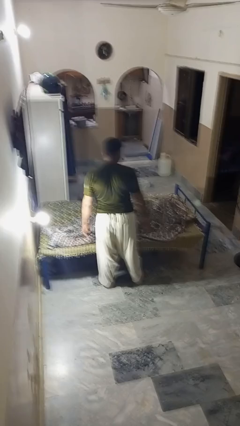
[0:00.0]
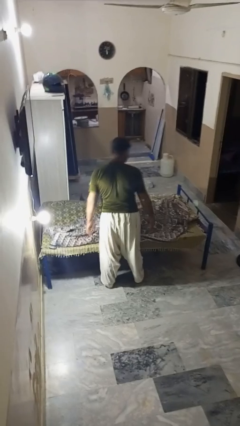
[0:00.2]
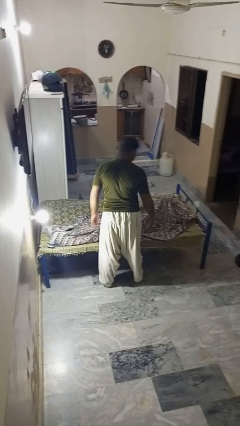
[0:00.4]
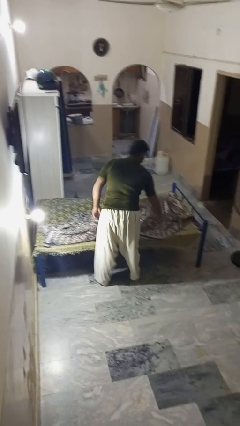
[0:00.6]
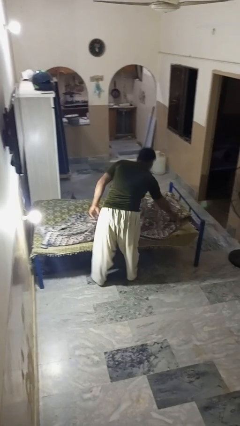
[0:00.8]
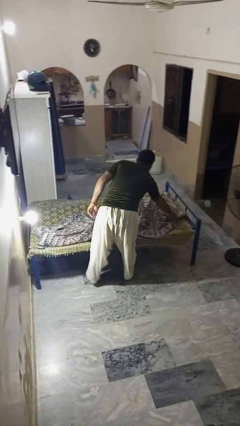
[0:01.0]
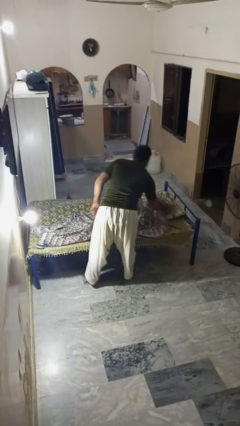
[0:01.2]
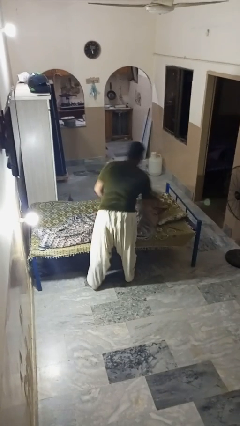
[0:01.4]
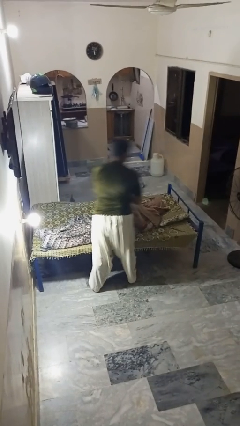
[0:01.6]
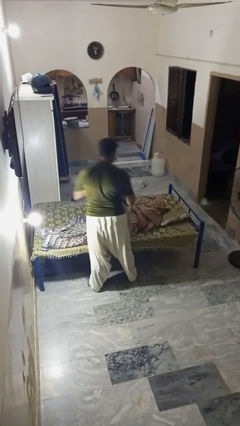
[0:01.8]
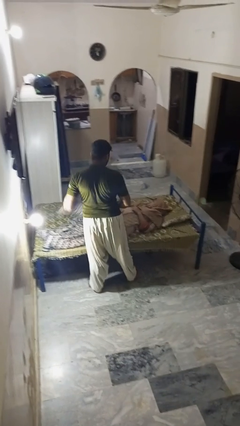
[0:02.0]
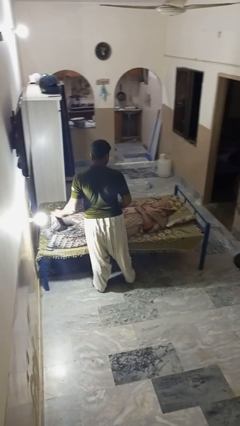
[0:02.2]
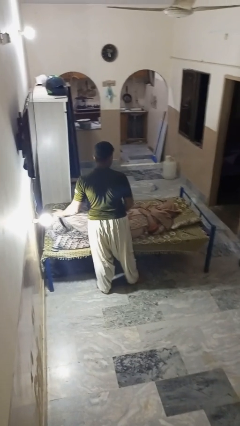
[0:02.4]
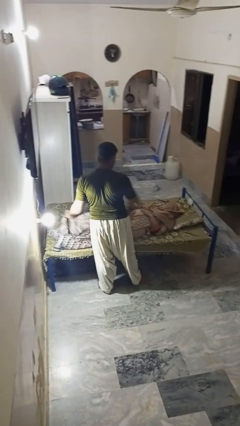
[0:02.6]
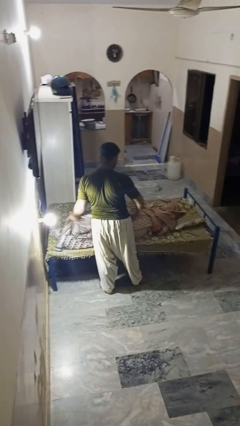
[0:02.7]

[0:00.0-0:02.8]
person uncovers friend with blanket

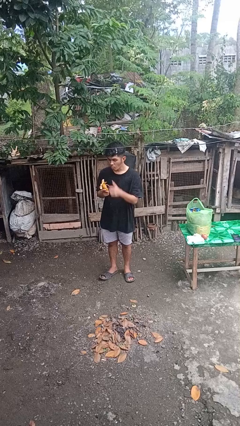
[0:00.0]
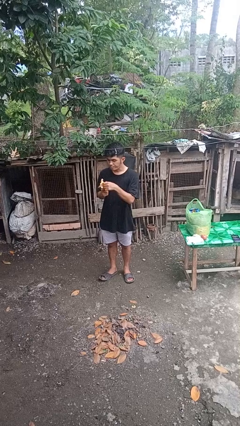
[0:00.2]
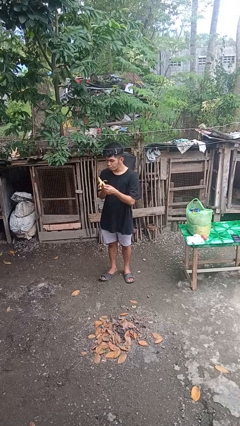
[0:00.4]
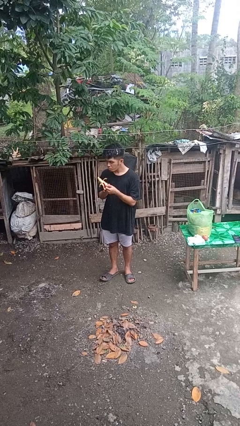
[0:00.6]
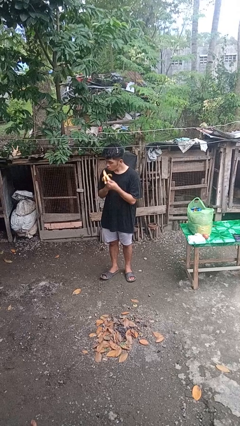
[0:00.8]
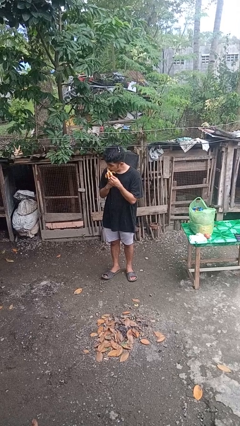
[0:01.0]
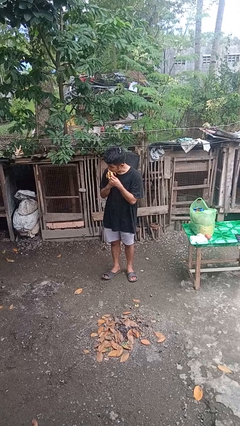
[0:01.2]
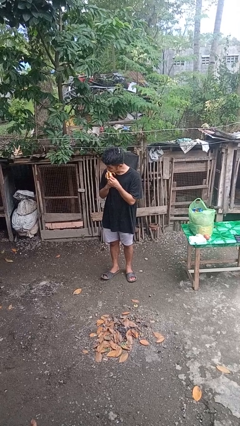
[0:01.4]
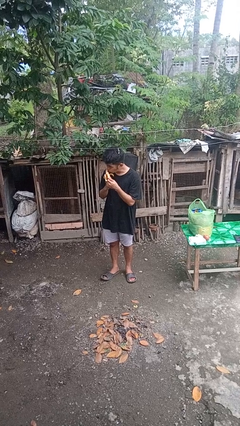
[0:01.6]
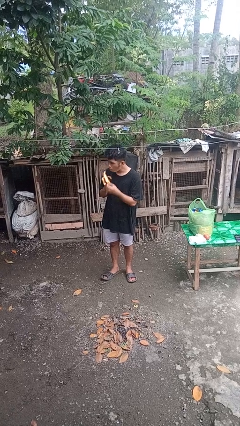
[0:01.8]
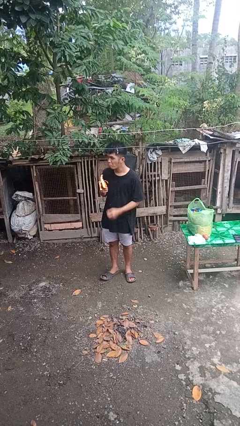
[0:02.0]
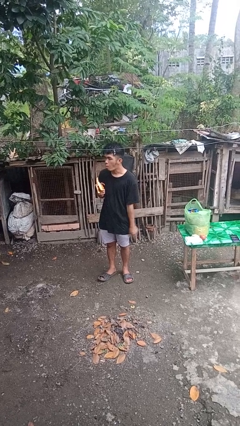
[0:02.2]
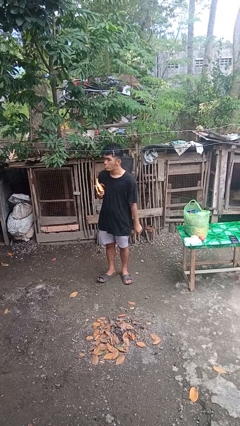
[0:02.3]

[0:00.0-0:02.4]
person eats banana

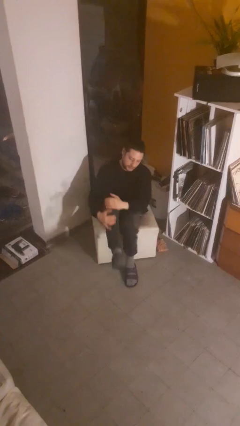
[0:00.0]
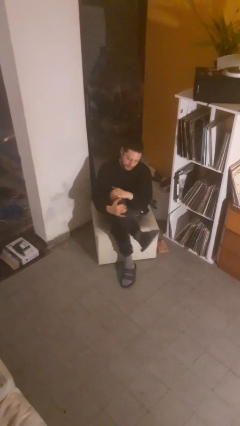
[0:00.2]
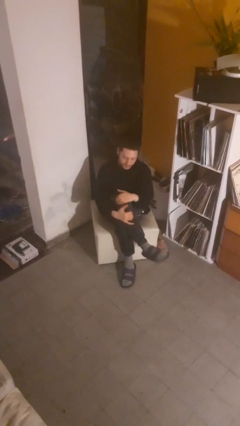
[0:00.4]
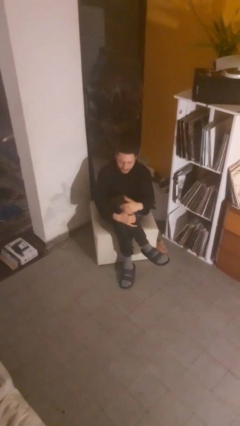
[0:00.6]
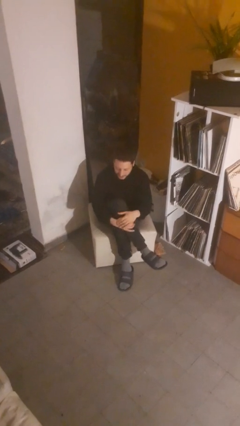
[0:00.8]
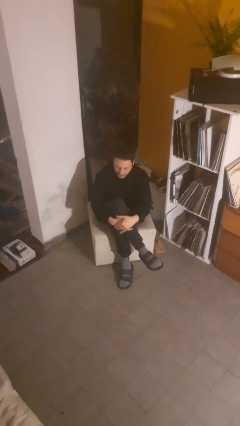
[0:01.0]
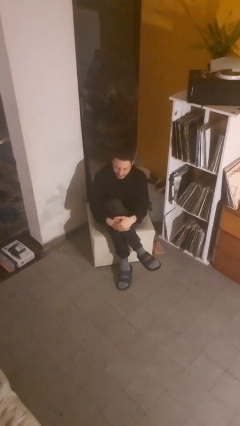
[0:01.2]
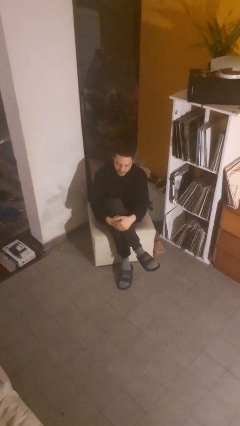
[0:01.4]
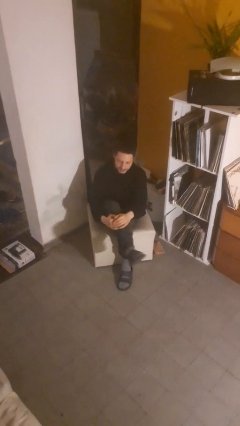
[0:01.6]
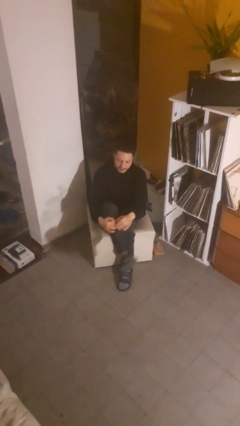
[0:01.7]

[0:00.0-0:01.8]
person crosses legs

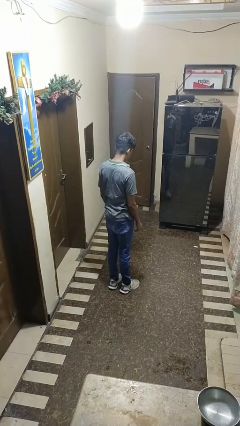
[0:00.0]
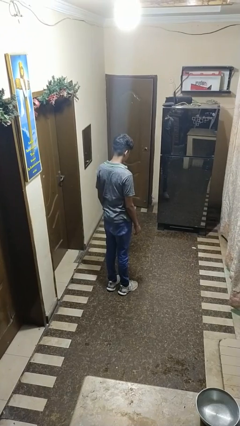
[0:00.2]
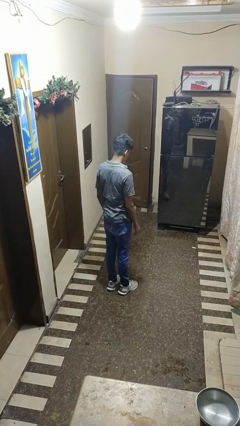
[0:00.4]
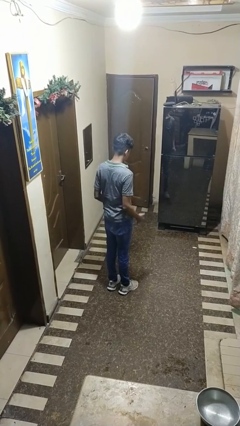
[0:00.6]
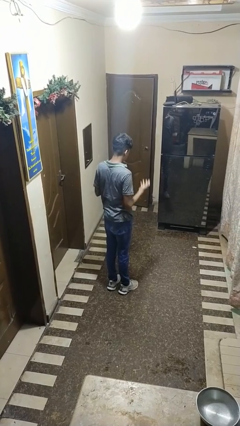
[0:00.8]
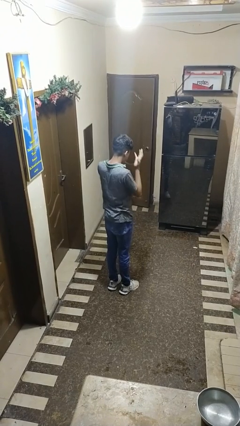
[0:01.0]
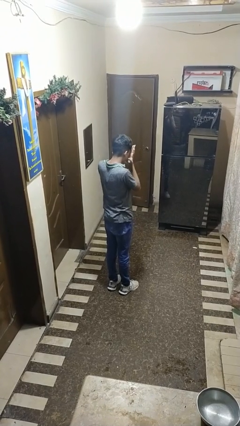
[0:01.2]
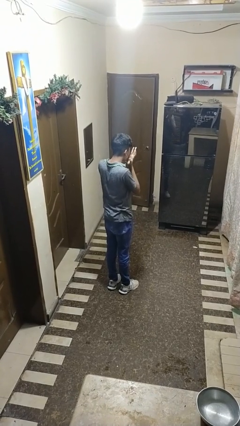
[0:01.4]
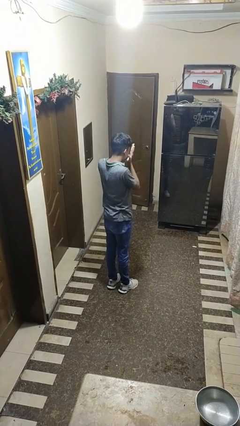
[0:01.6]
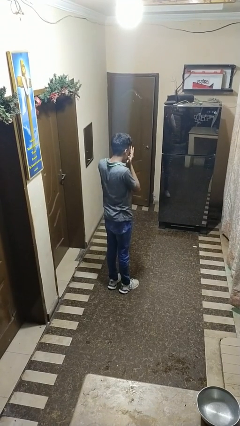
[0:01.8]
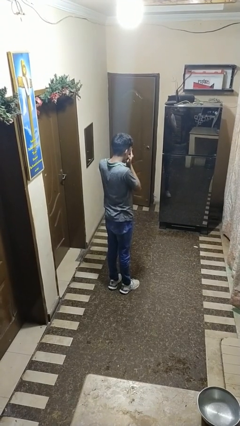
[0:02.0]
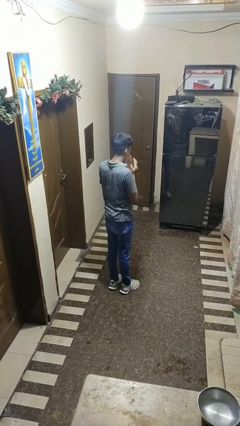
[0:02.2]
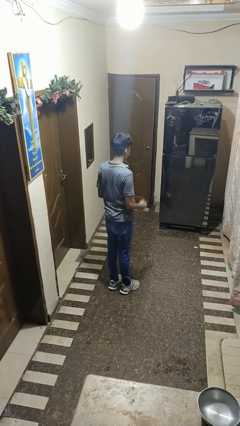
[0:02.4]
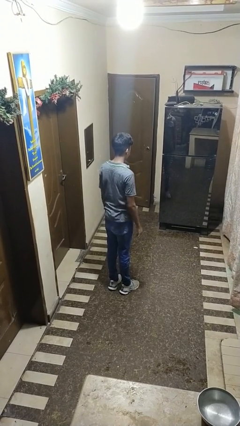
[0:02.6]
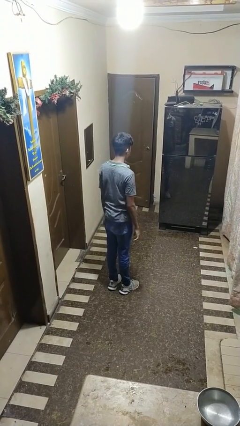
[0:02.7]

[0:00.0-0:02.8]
person rubs eyes

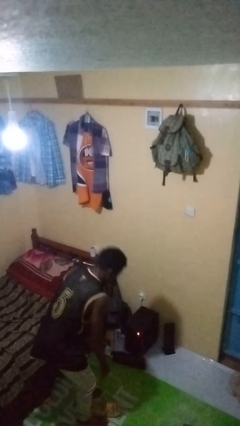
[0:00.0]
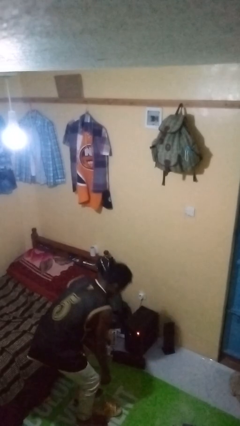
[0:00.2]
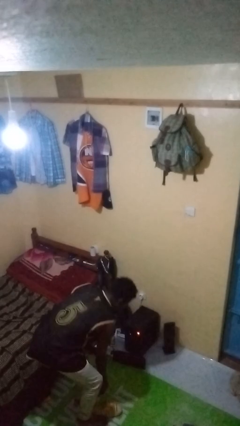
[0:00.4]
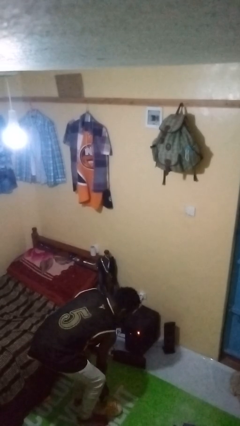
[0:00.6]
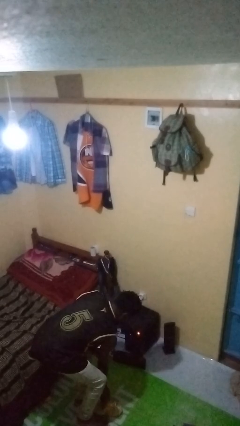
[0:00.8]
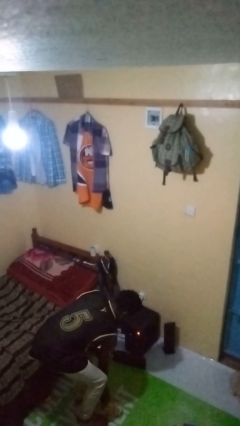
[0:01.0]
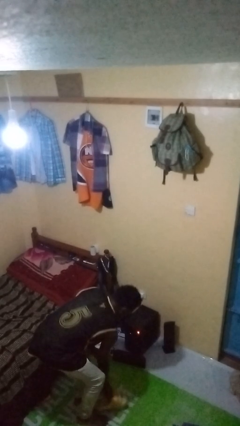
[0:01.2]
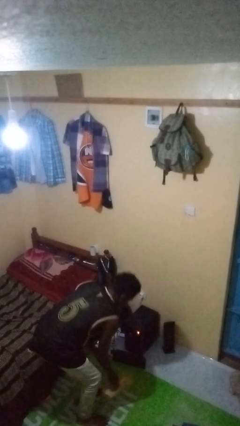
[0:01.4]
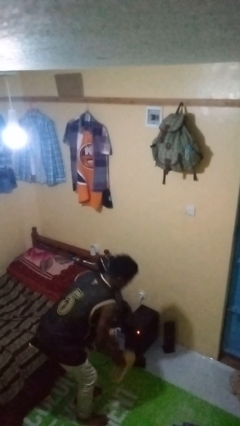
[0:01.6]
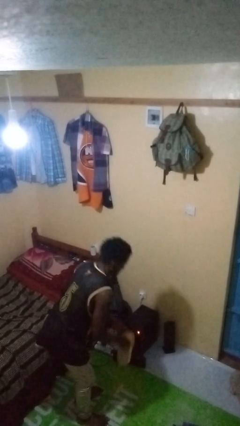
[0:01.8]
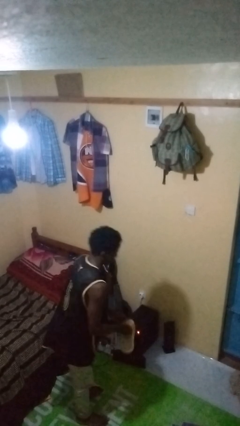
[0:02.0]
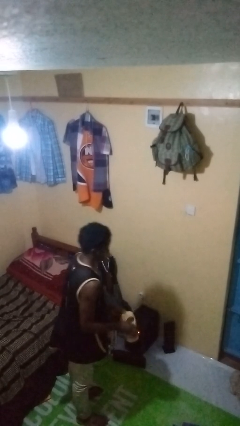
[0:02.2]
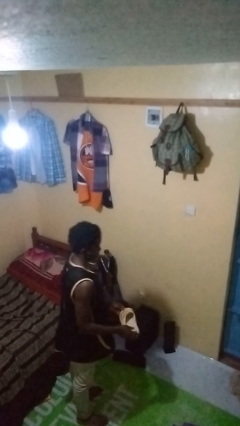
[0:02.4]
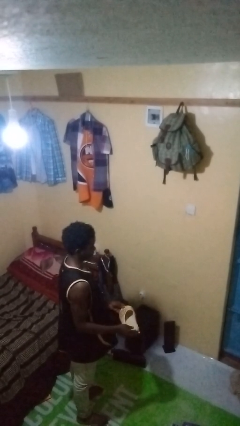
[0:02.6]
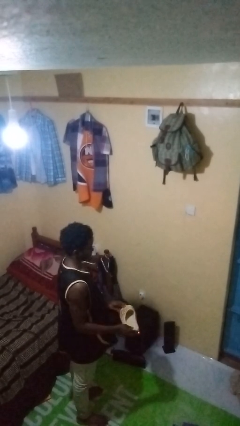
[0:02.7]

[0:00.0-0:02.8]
person picks up object from floor

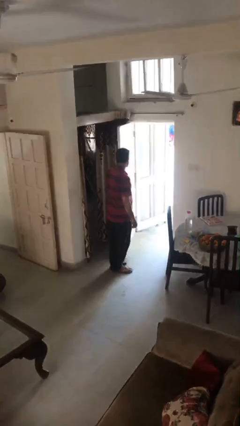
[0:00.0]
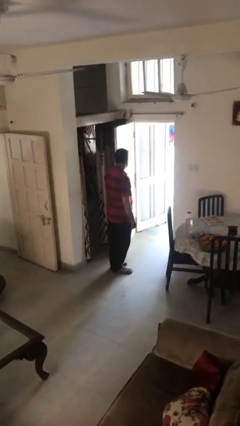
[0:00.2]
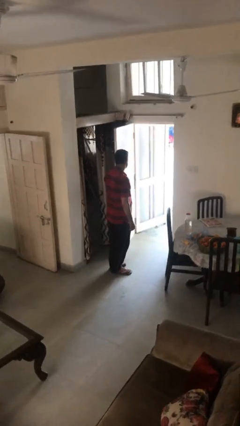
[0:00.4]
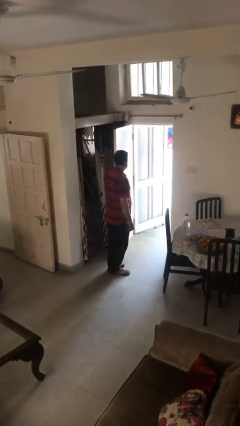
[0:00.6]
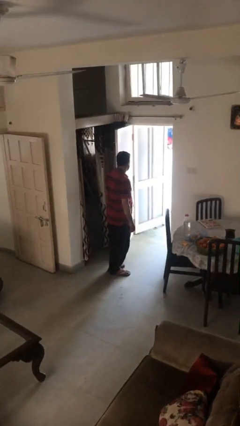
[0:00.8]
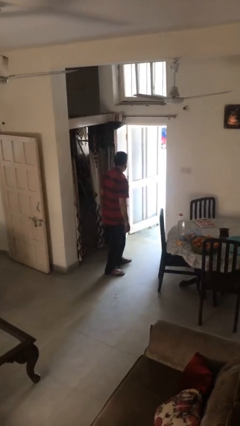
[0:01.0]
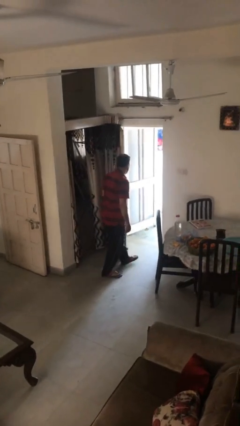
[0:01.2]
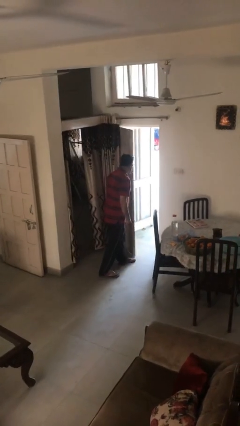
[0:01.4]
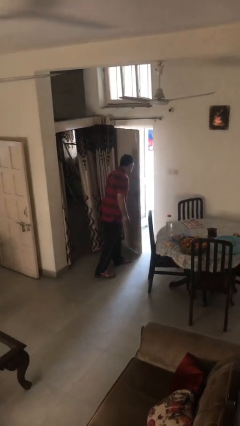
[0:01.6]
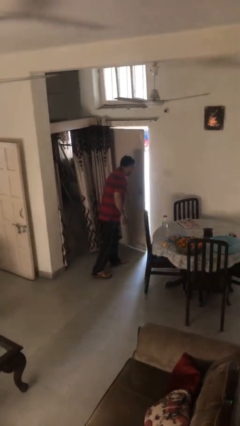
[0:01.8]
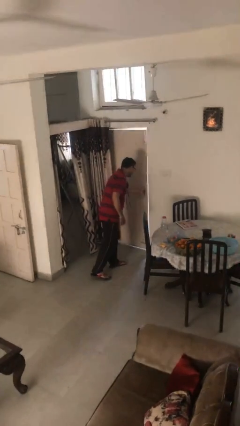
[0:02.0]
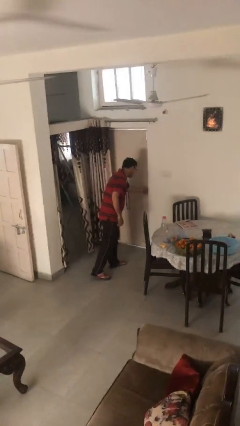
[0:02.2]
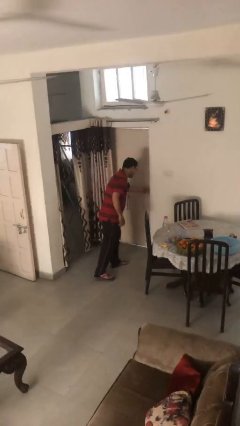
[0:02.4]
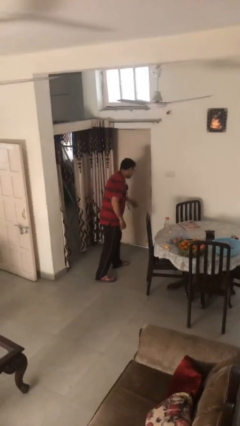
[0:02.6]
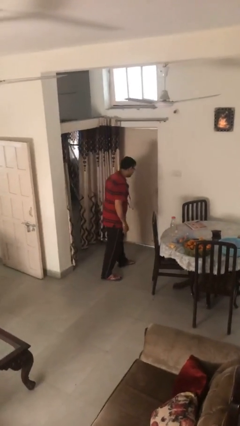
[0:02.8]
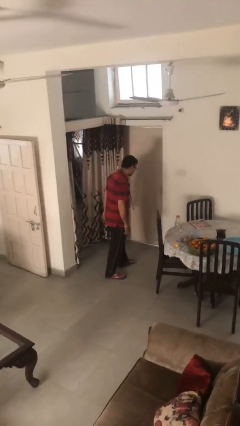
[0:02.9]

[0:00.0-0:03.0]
person closes facility door

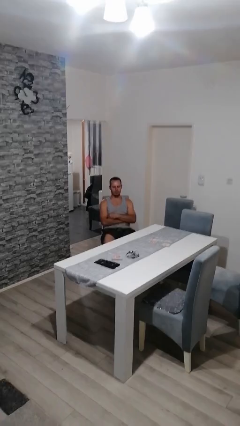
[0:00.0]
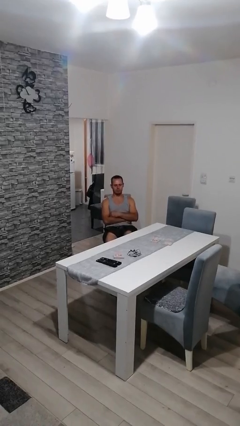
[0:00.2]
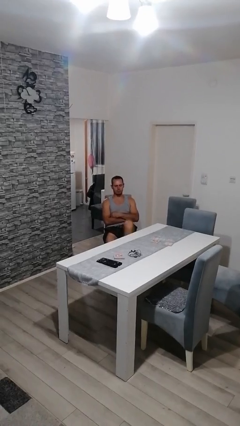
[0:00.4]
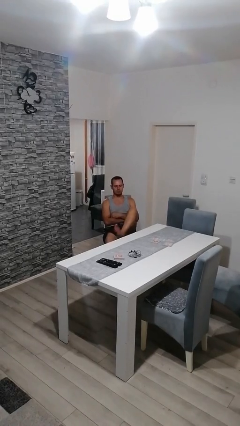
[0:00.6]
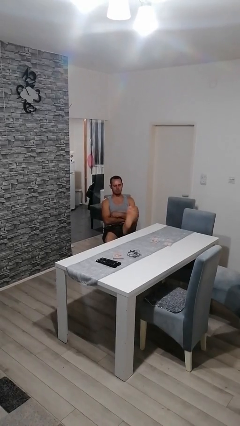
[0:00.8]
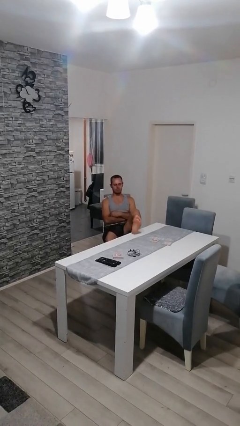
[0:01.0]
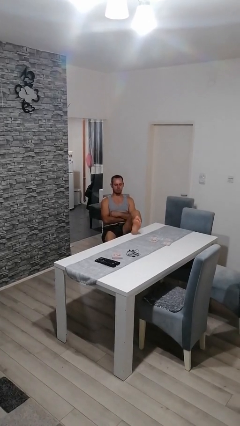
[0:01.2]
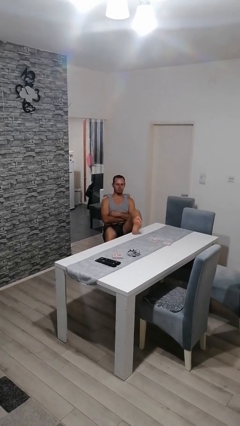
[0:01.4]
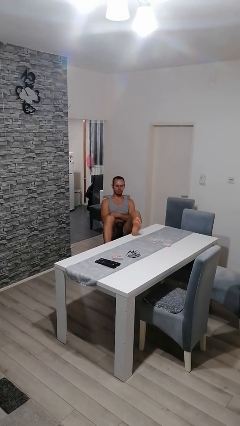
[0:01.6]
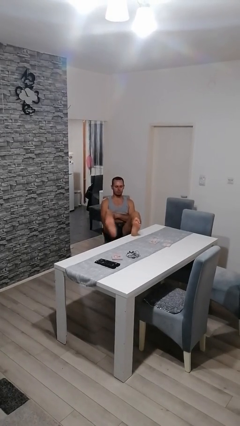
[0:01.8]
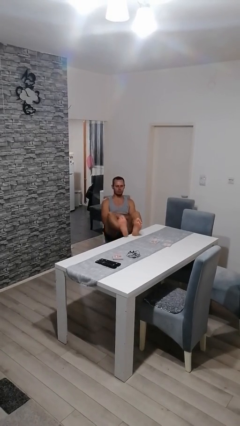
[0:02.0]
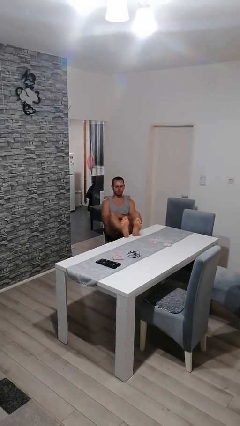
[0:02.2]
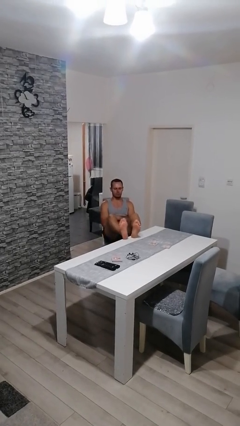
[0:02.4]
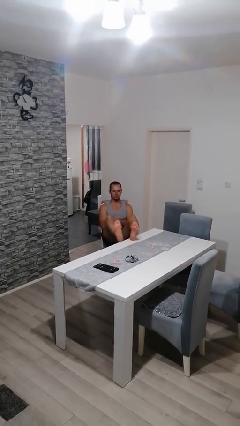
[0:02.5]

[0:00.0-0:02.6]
person puts feet up
